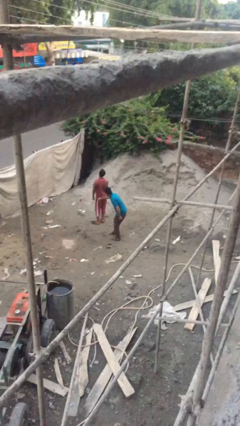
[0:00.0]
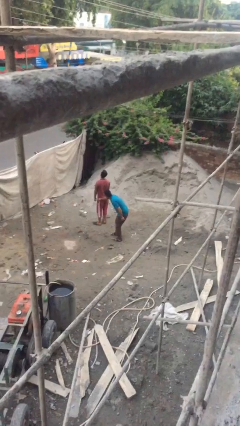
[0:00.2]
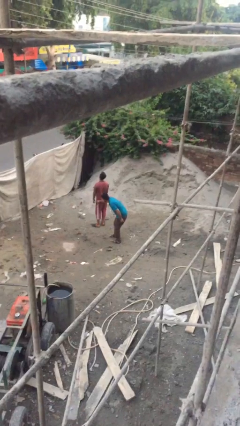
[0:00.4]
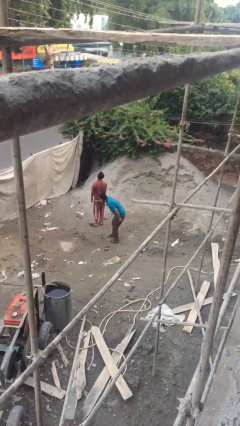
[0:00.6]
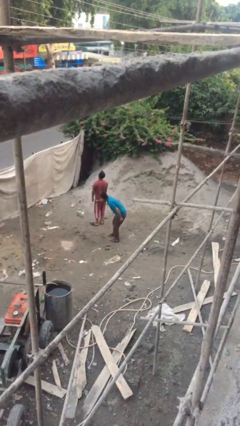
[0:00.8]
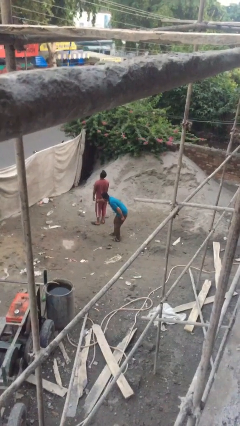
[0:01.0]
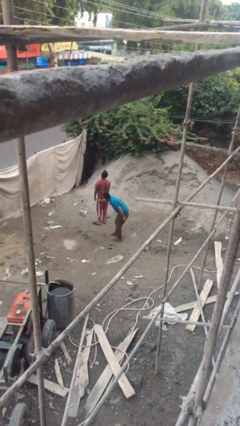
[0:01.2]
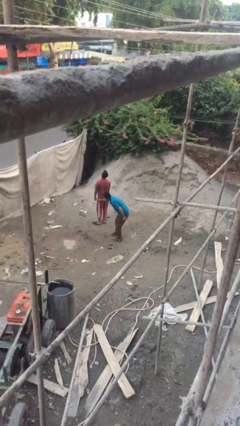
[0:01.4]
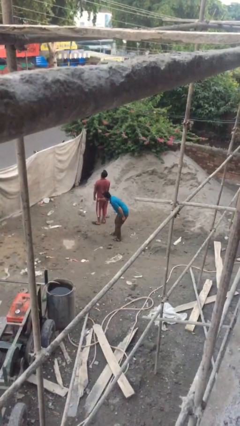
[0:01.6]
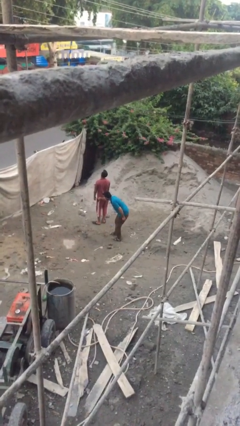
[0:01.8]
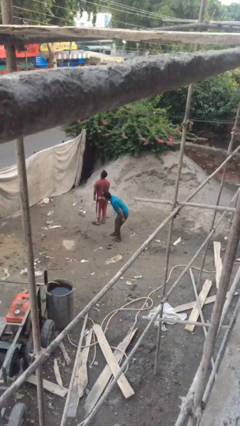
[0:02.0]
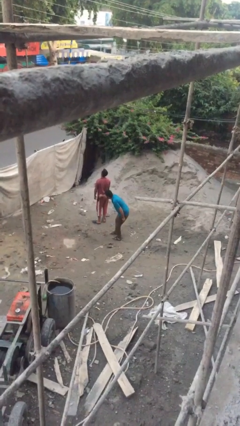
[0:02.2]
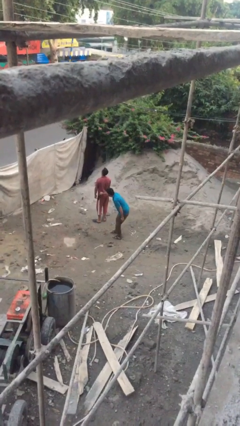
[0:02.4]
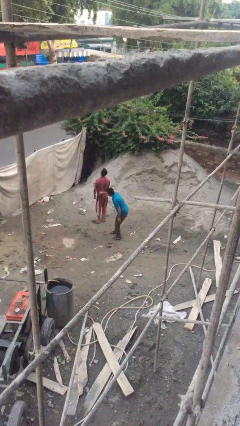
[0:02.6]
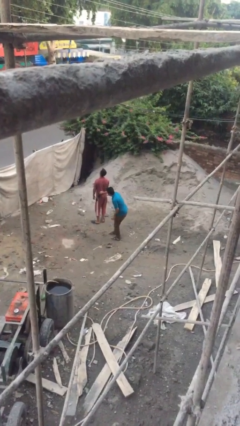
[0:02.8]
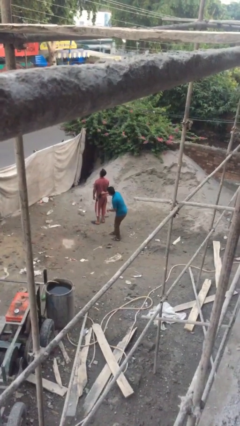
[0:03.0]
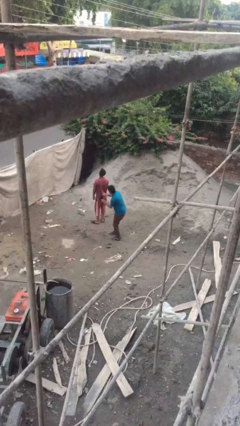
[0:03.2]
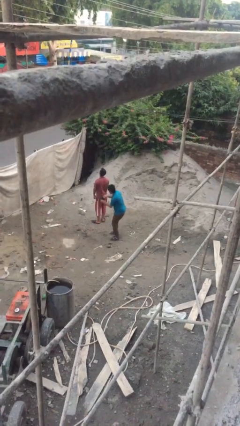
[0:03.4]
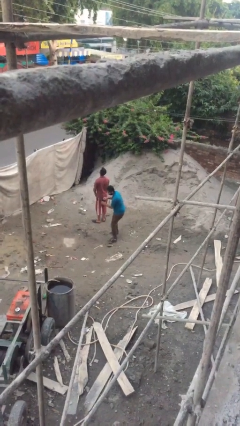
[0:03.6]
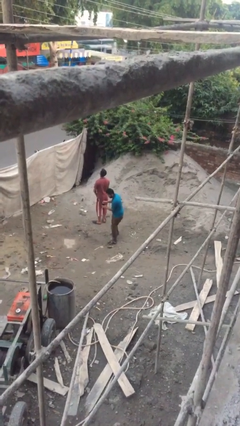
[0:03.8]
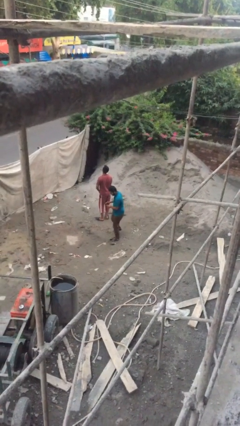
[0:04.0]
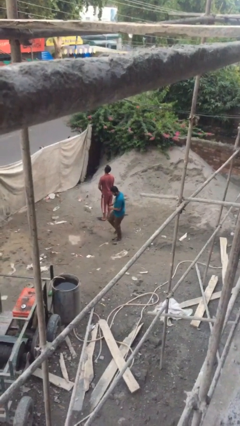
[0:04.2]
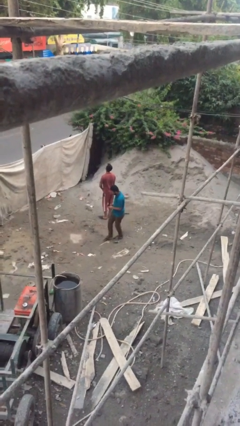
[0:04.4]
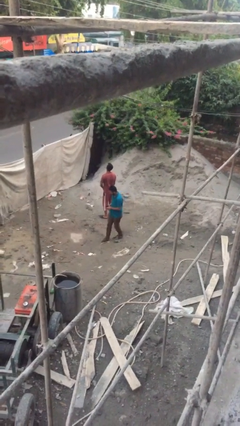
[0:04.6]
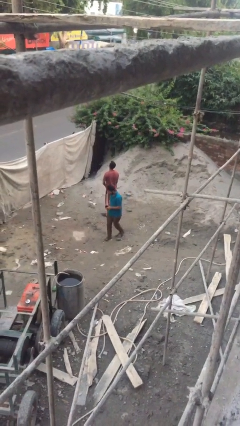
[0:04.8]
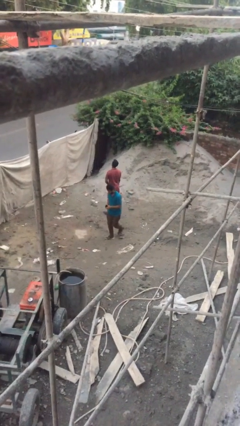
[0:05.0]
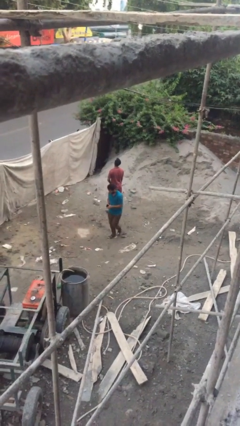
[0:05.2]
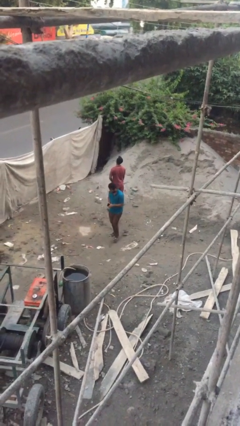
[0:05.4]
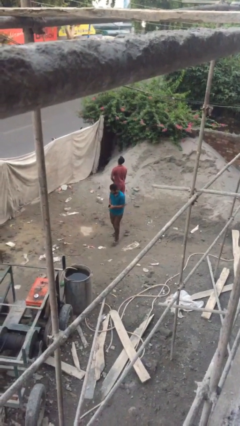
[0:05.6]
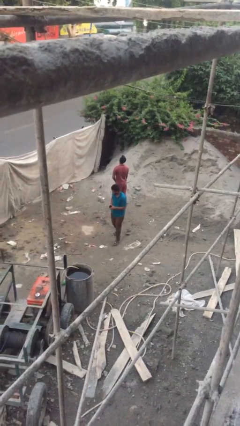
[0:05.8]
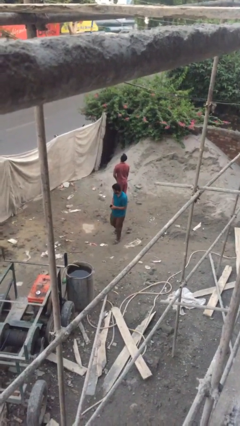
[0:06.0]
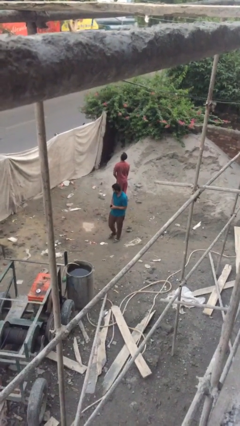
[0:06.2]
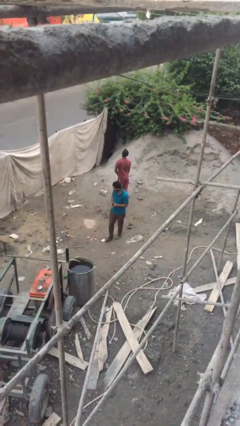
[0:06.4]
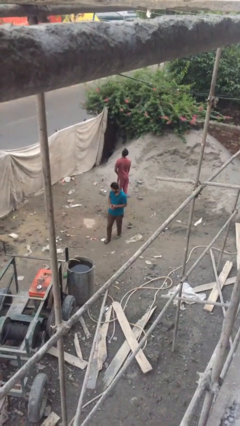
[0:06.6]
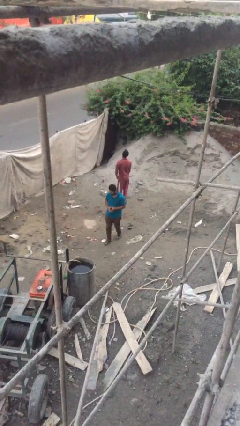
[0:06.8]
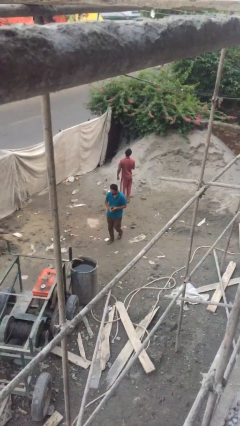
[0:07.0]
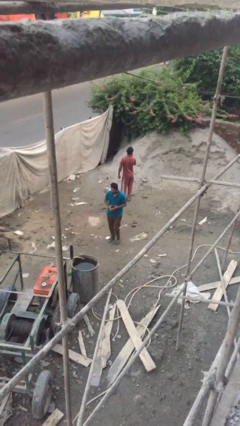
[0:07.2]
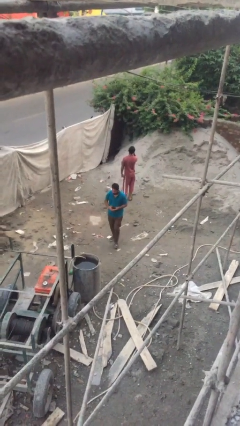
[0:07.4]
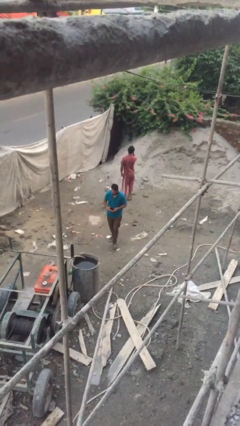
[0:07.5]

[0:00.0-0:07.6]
person steals object from person

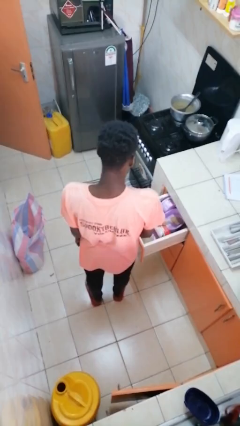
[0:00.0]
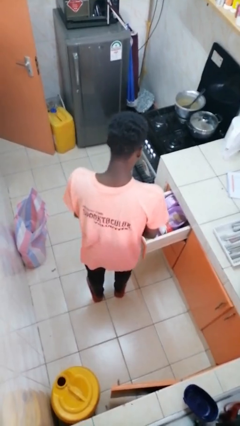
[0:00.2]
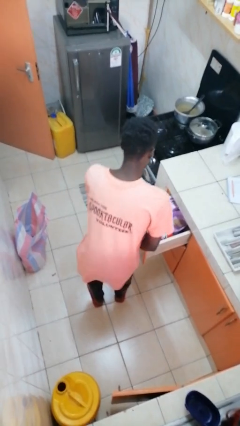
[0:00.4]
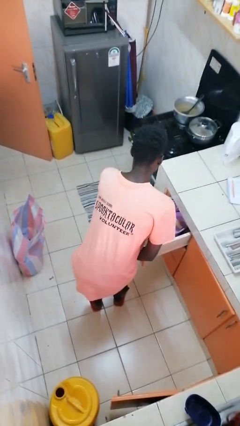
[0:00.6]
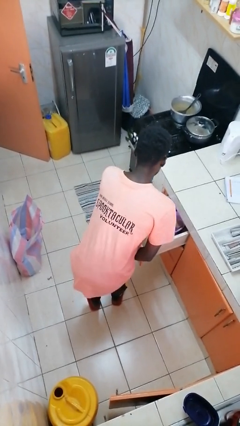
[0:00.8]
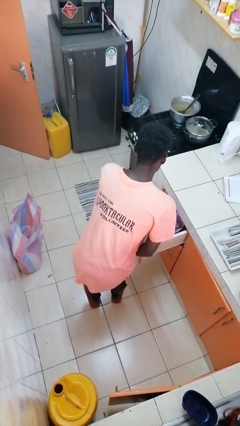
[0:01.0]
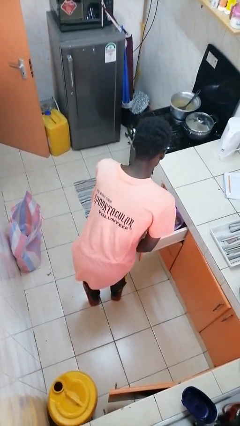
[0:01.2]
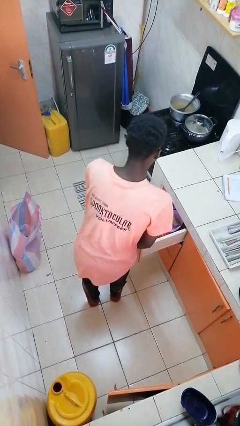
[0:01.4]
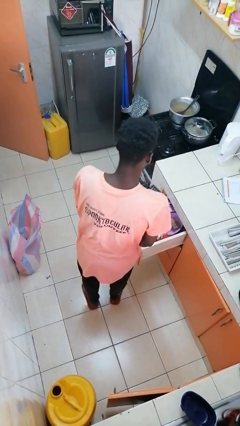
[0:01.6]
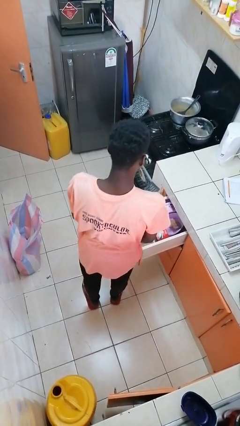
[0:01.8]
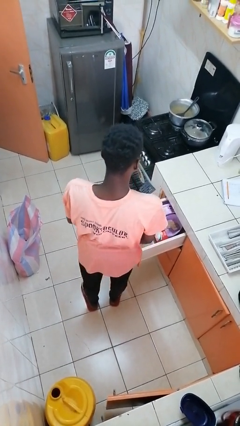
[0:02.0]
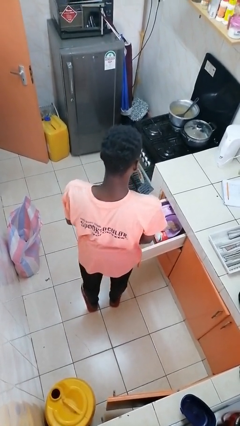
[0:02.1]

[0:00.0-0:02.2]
person takes object from kitchen drawer

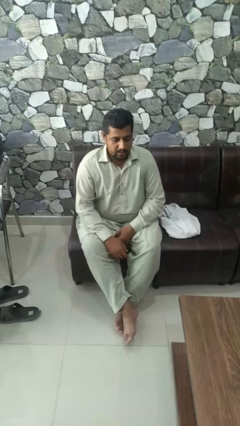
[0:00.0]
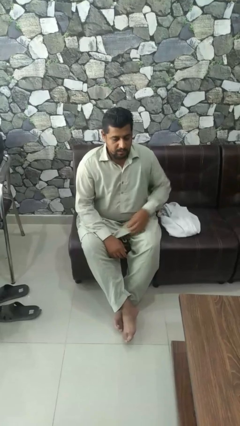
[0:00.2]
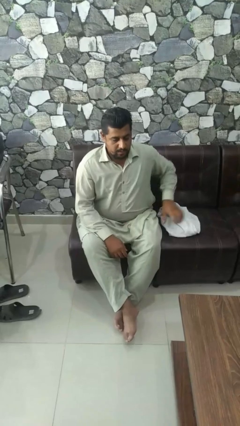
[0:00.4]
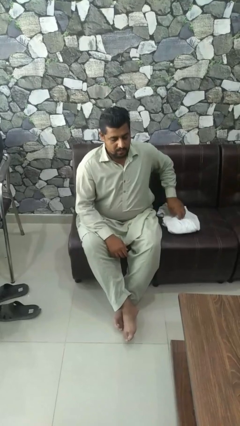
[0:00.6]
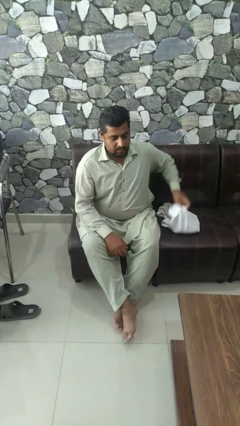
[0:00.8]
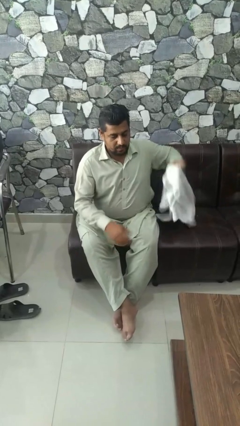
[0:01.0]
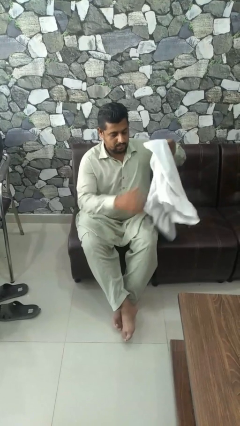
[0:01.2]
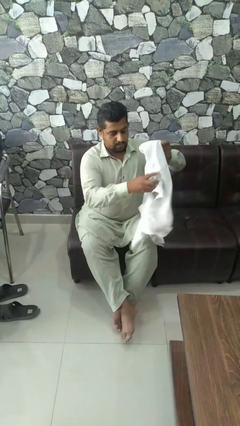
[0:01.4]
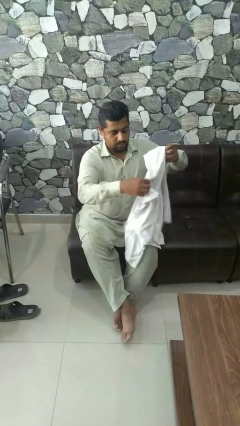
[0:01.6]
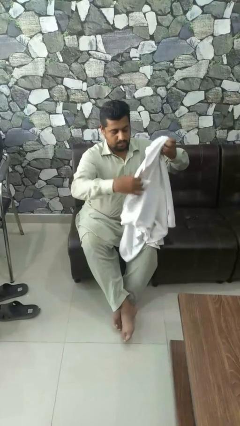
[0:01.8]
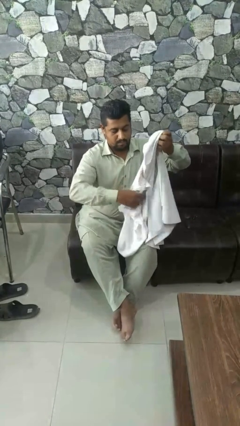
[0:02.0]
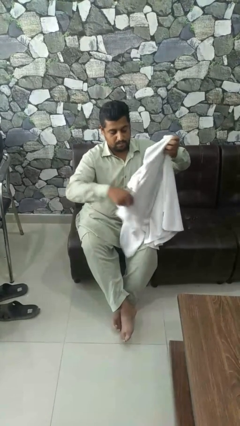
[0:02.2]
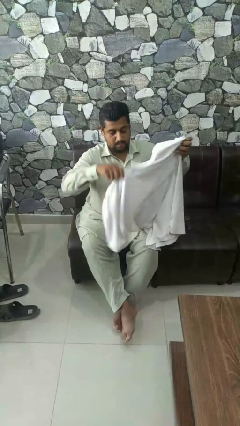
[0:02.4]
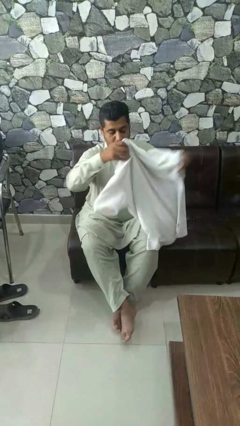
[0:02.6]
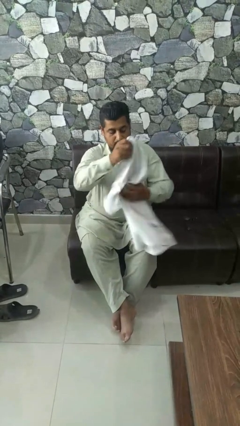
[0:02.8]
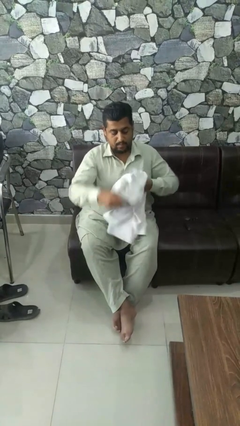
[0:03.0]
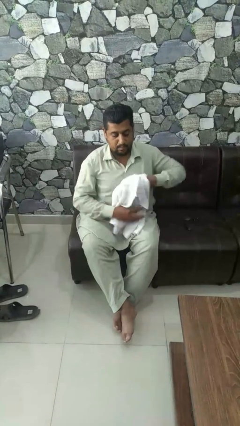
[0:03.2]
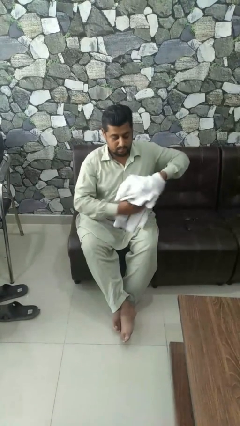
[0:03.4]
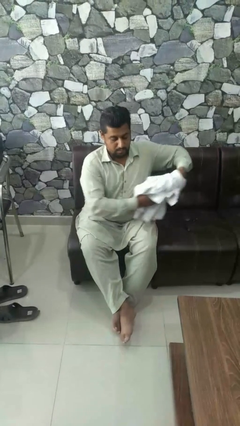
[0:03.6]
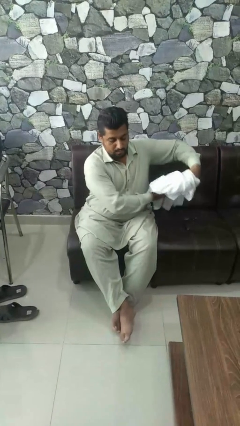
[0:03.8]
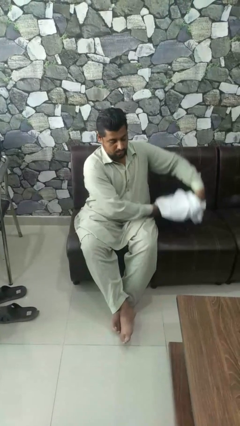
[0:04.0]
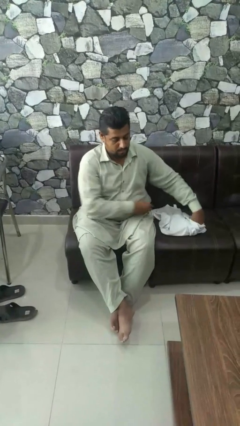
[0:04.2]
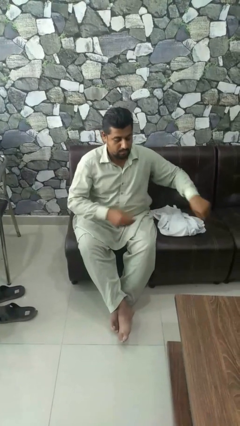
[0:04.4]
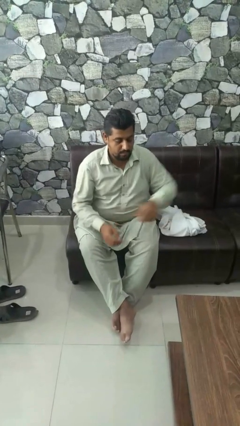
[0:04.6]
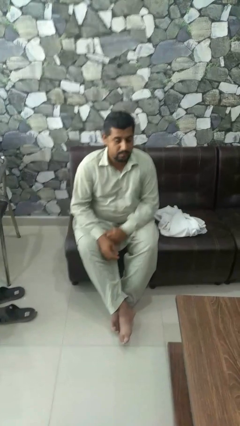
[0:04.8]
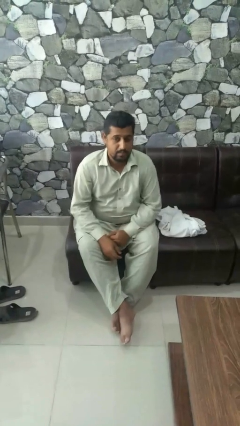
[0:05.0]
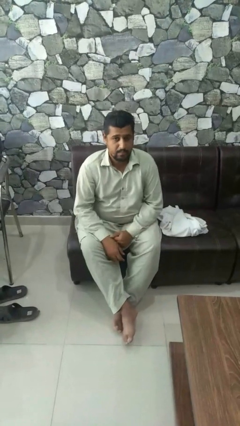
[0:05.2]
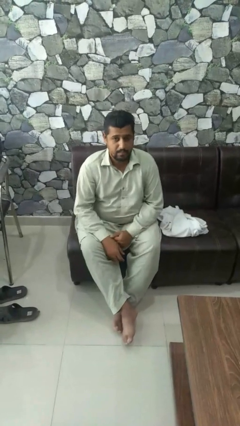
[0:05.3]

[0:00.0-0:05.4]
person folds shirt

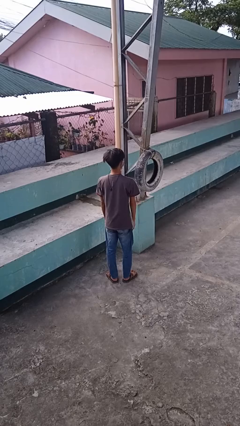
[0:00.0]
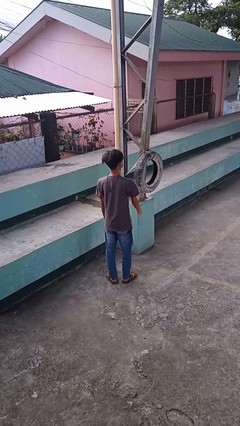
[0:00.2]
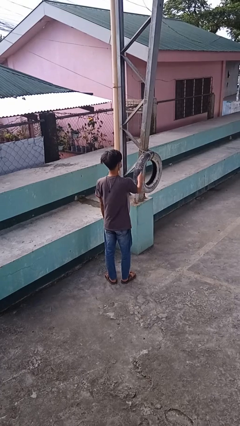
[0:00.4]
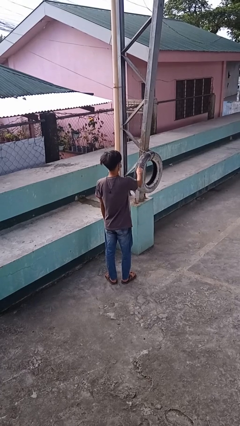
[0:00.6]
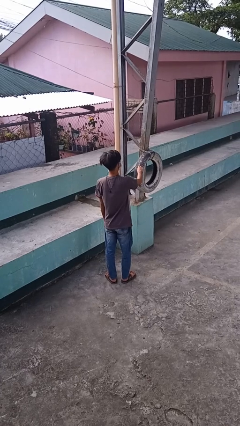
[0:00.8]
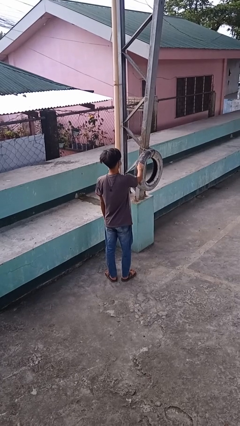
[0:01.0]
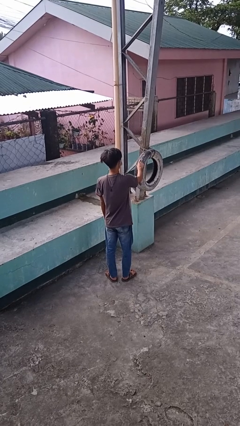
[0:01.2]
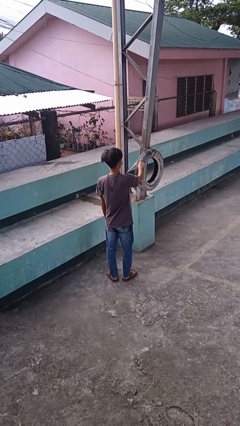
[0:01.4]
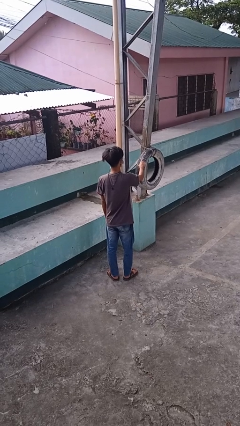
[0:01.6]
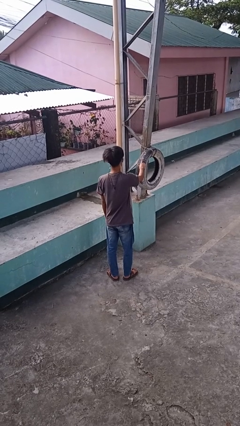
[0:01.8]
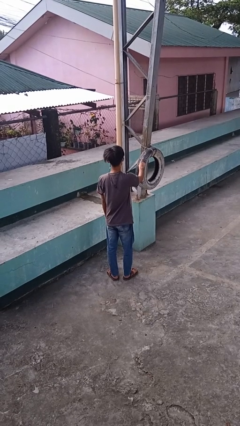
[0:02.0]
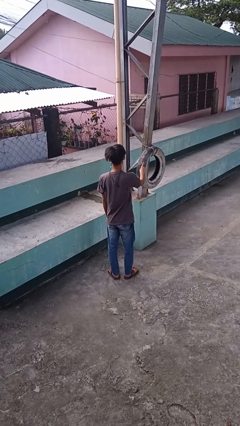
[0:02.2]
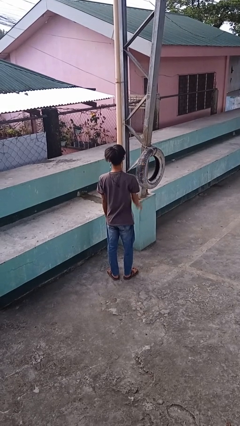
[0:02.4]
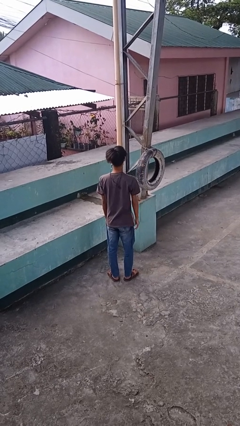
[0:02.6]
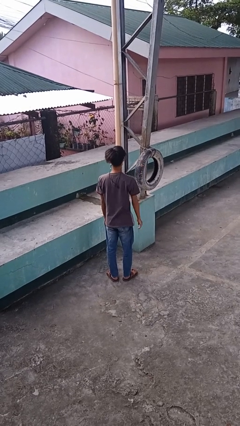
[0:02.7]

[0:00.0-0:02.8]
person taps object with finger
